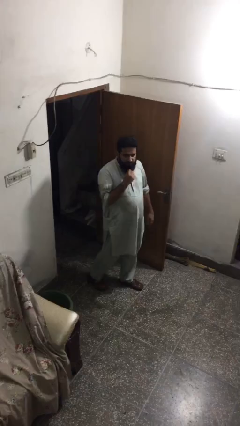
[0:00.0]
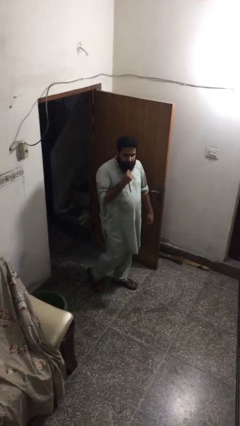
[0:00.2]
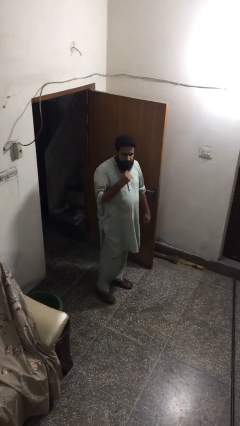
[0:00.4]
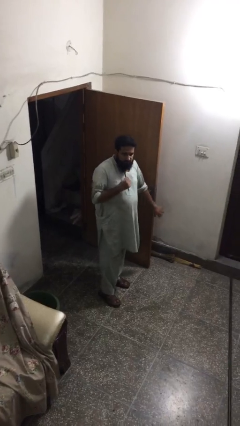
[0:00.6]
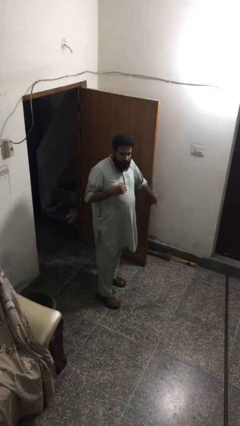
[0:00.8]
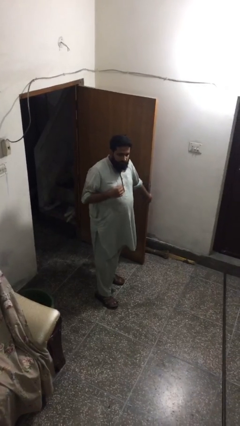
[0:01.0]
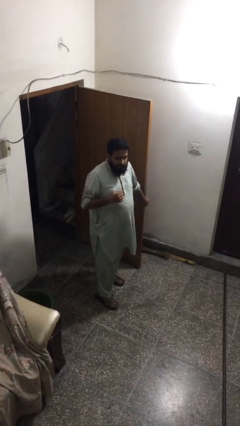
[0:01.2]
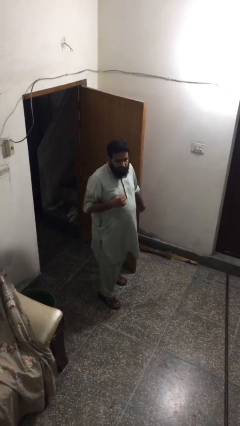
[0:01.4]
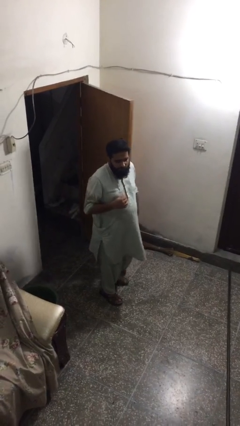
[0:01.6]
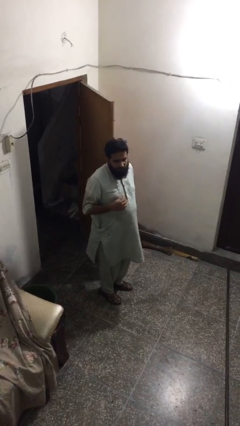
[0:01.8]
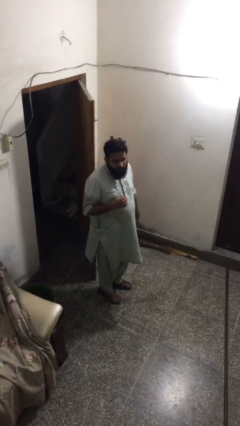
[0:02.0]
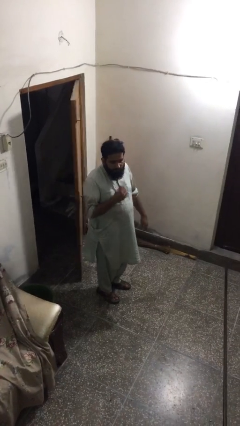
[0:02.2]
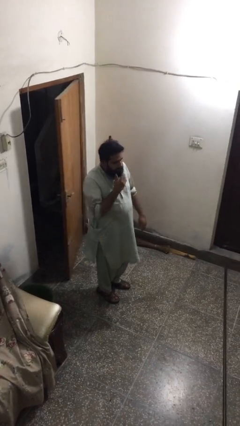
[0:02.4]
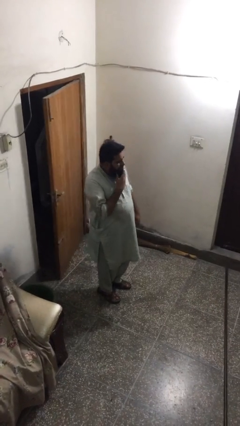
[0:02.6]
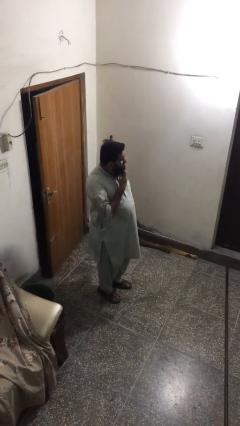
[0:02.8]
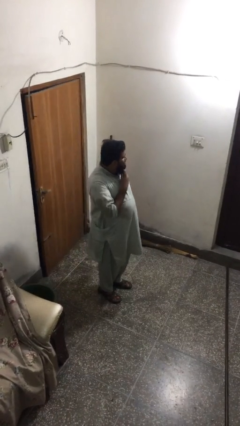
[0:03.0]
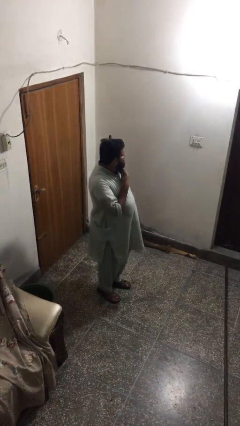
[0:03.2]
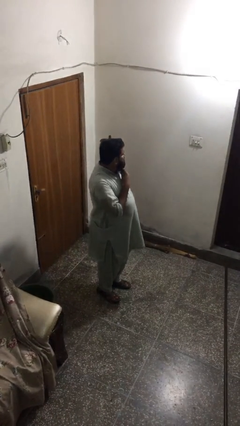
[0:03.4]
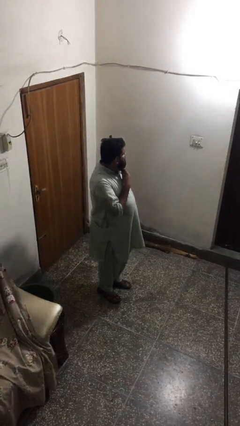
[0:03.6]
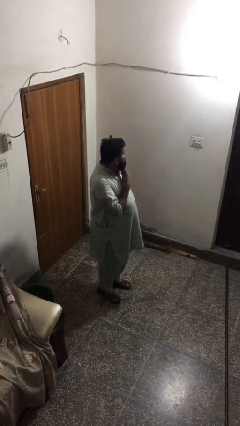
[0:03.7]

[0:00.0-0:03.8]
person closes facility door

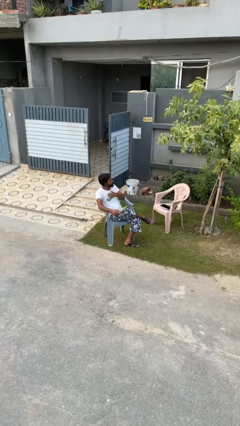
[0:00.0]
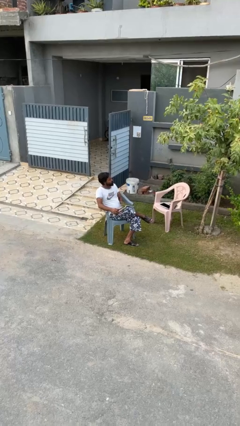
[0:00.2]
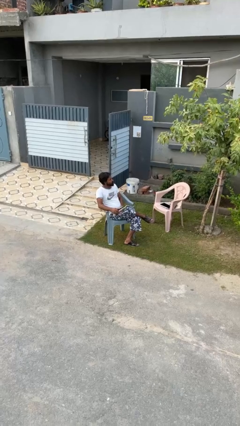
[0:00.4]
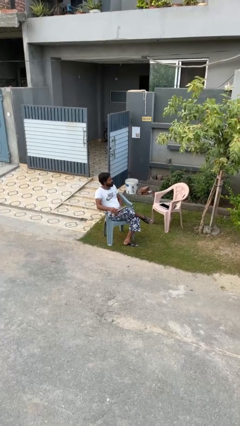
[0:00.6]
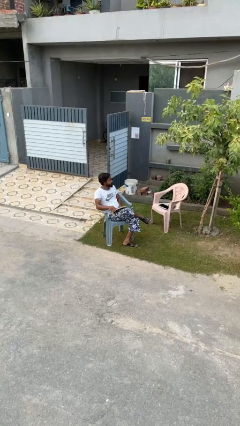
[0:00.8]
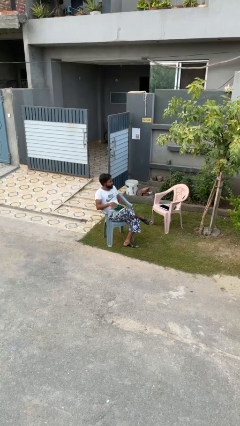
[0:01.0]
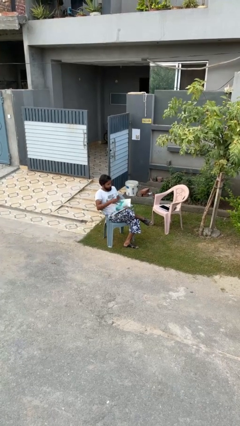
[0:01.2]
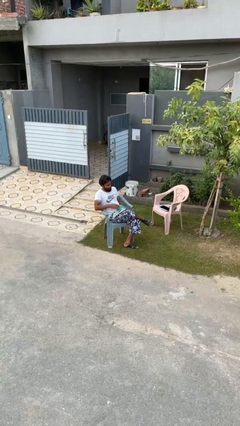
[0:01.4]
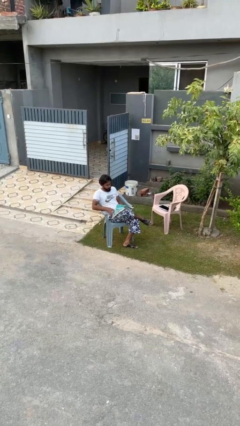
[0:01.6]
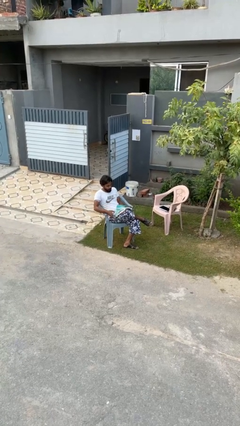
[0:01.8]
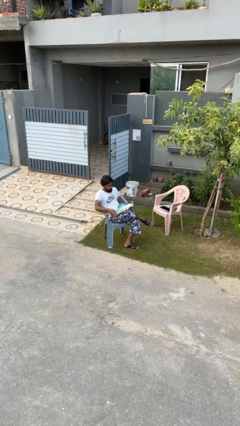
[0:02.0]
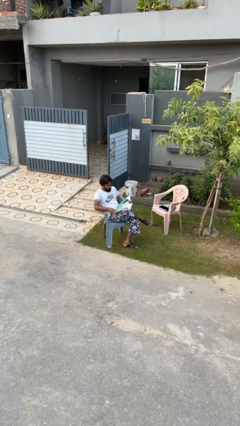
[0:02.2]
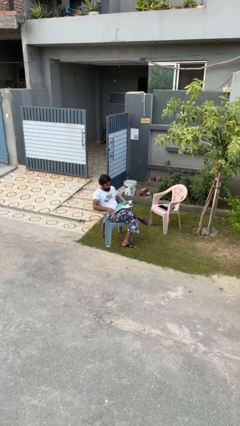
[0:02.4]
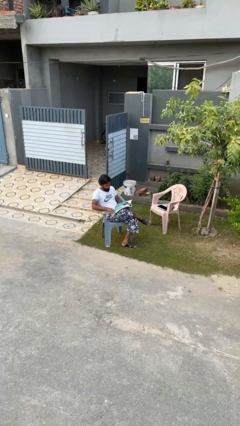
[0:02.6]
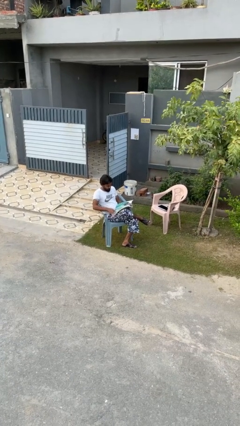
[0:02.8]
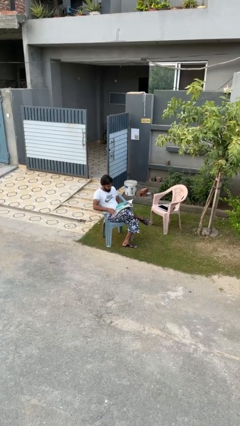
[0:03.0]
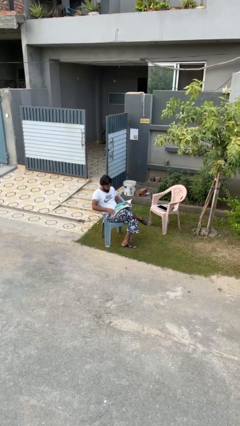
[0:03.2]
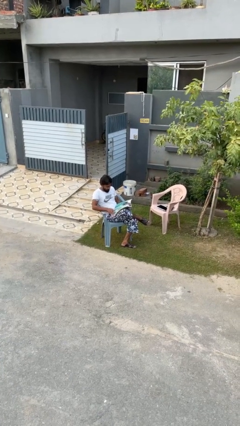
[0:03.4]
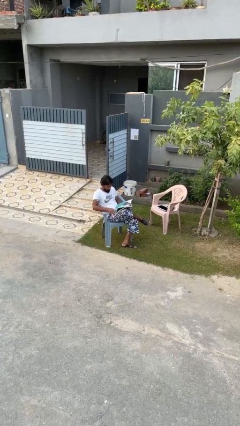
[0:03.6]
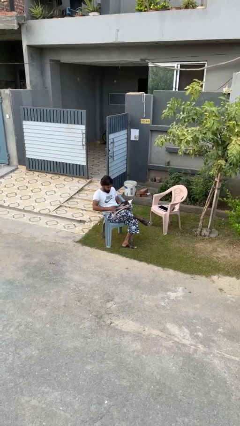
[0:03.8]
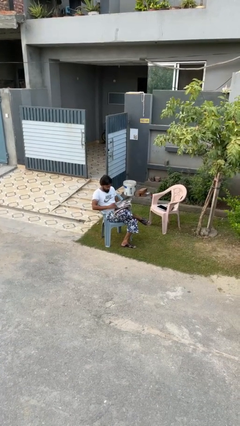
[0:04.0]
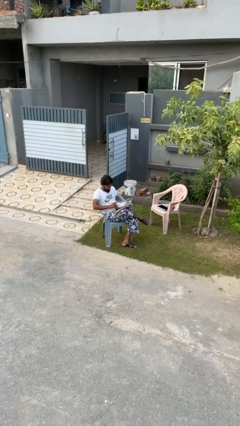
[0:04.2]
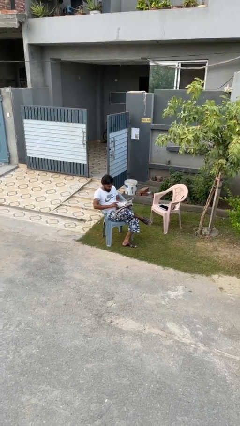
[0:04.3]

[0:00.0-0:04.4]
person reads magazine

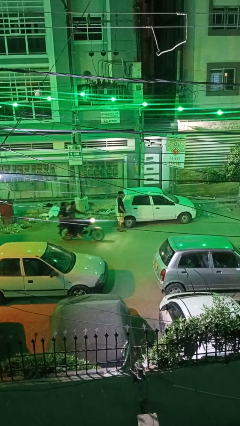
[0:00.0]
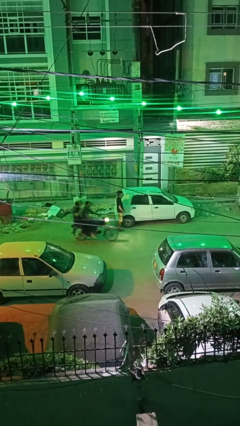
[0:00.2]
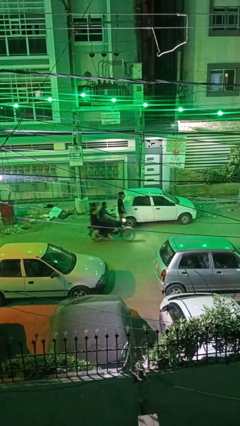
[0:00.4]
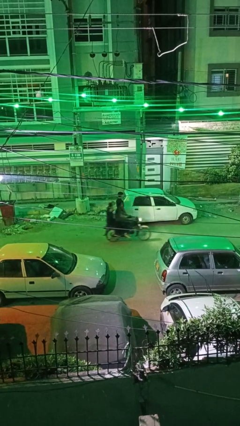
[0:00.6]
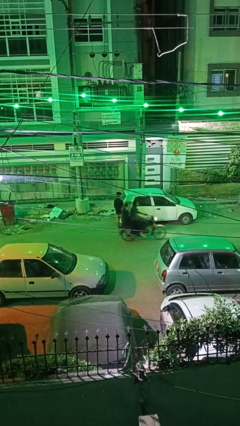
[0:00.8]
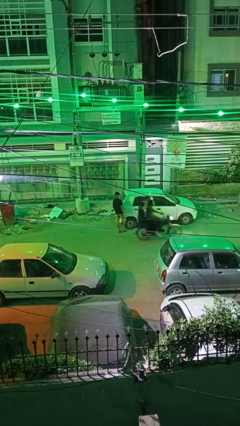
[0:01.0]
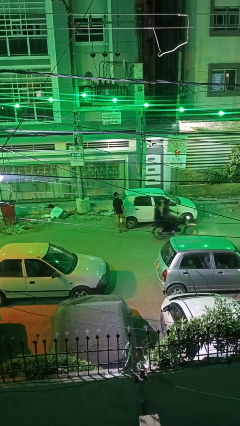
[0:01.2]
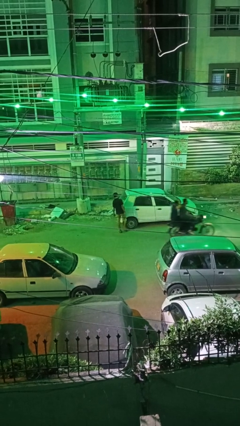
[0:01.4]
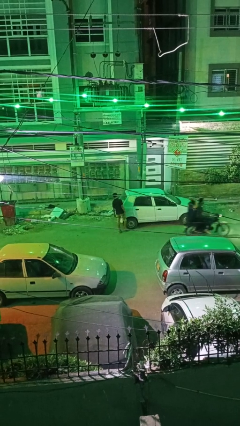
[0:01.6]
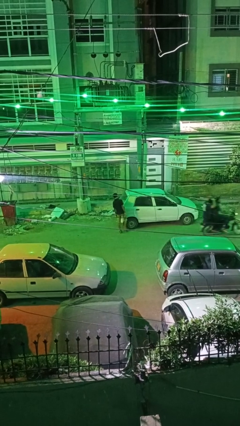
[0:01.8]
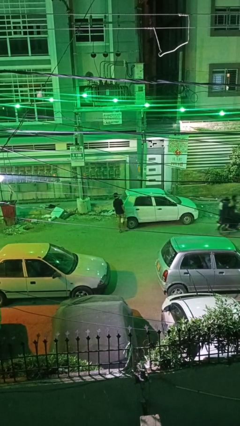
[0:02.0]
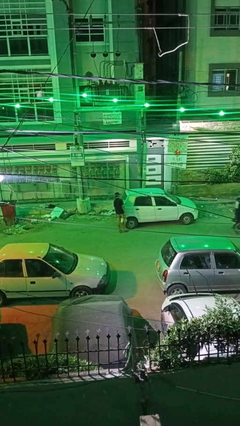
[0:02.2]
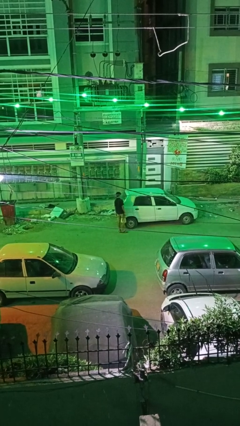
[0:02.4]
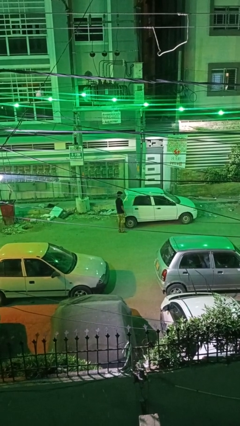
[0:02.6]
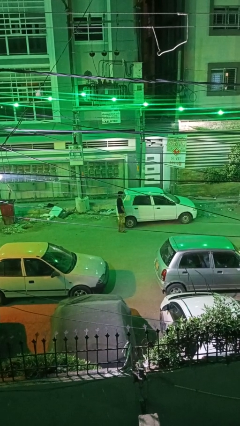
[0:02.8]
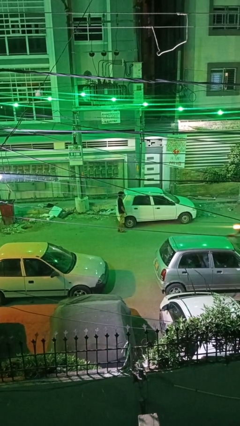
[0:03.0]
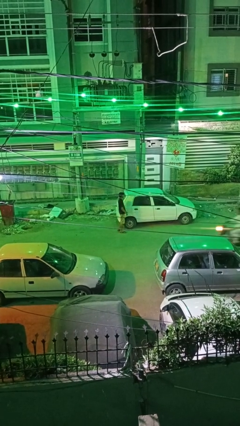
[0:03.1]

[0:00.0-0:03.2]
person kicks car tires

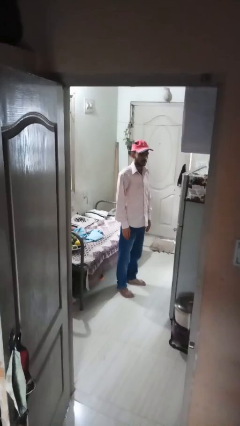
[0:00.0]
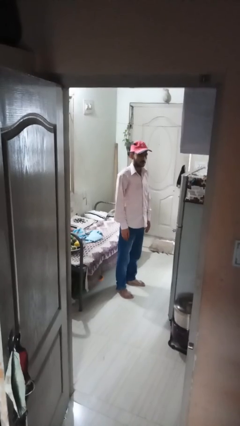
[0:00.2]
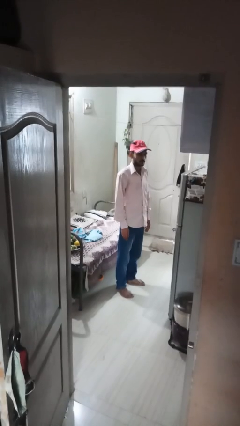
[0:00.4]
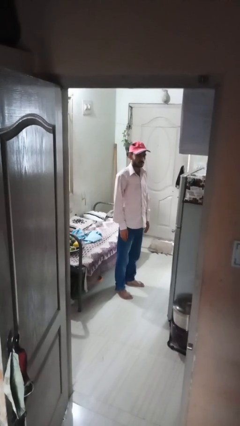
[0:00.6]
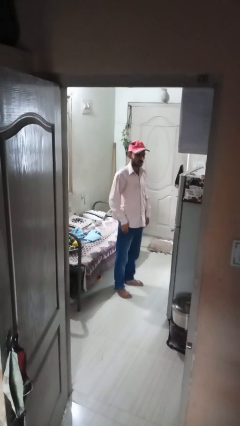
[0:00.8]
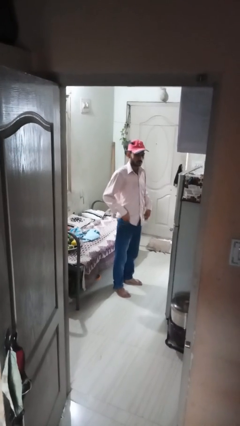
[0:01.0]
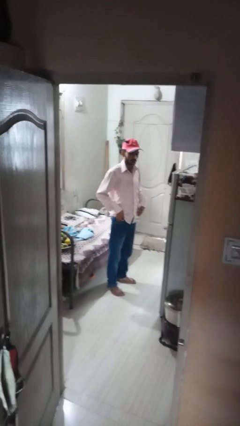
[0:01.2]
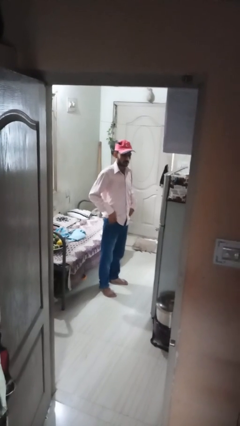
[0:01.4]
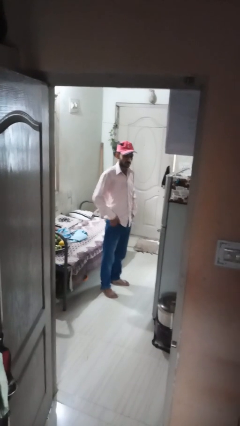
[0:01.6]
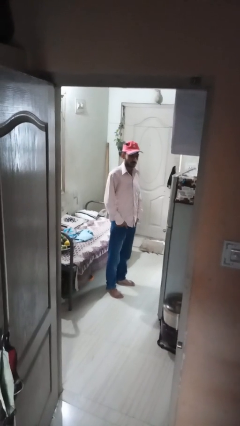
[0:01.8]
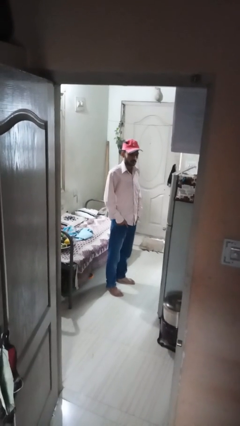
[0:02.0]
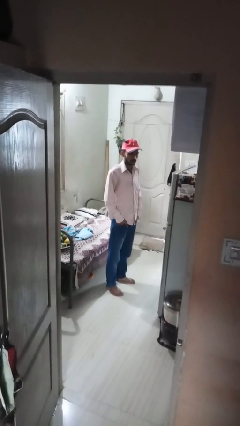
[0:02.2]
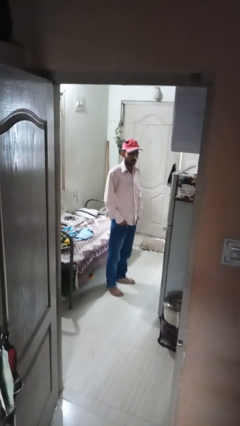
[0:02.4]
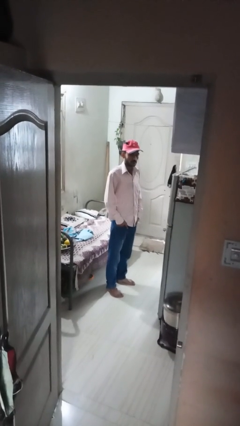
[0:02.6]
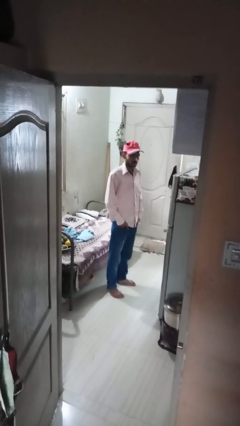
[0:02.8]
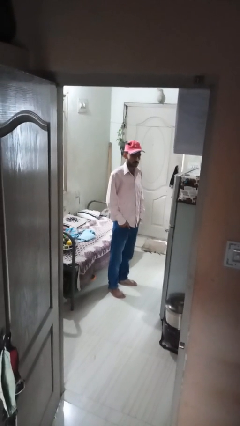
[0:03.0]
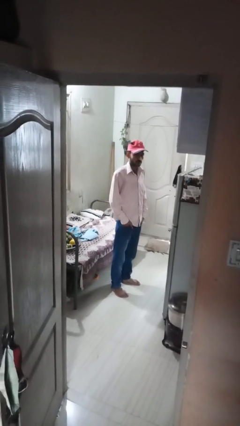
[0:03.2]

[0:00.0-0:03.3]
person puts hands in back pockets

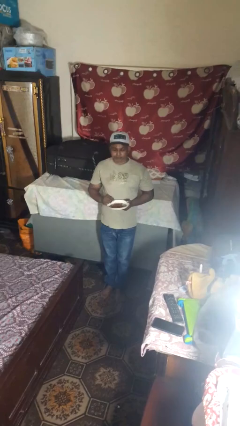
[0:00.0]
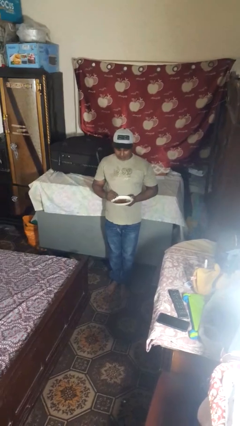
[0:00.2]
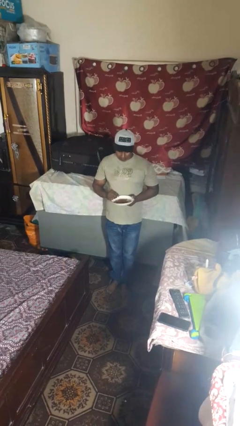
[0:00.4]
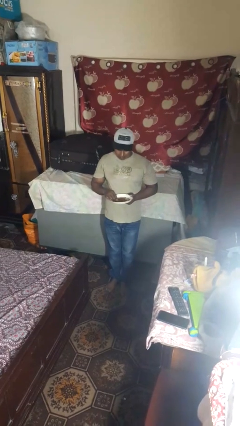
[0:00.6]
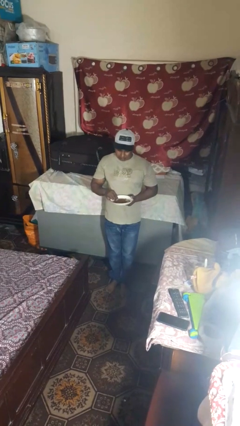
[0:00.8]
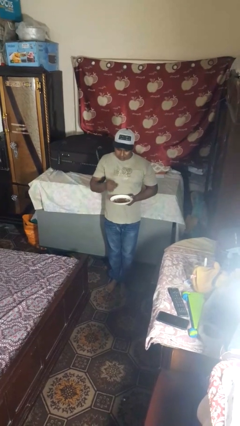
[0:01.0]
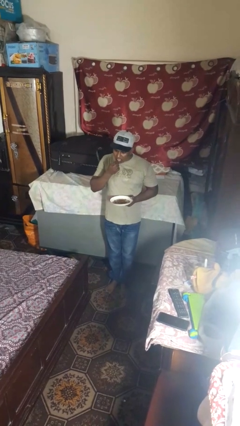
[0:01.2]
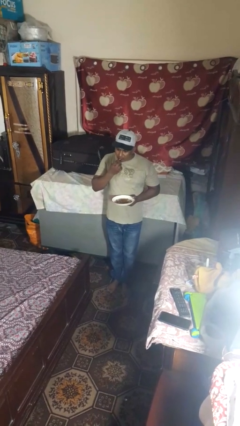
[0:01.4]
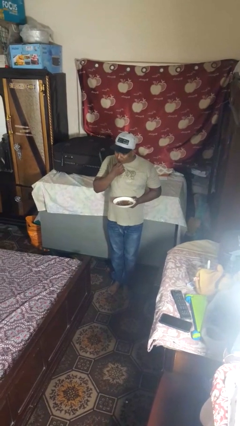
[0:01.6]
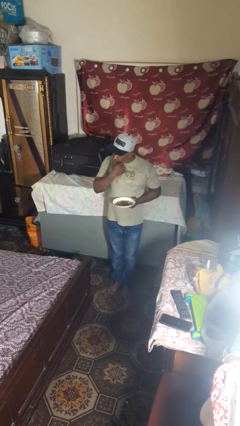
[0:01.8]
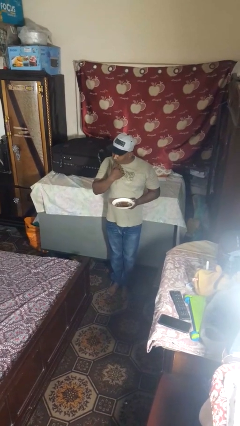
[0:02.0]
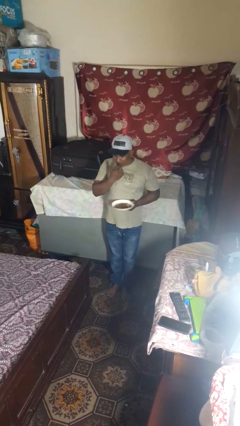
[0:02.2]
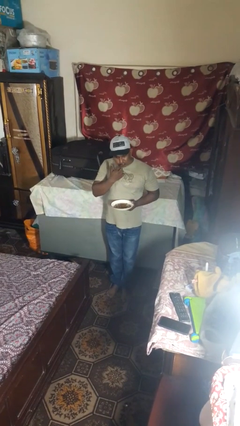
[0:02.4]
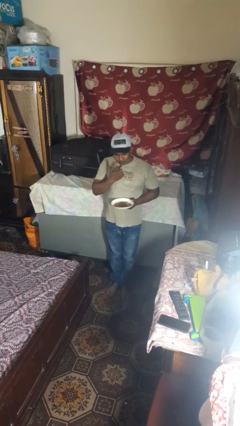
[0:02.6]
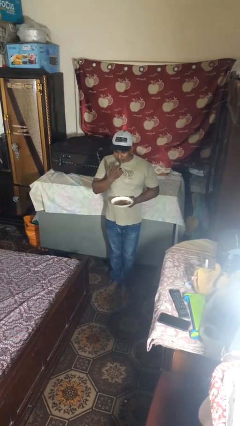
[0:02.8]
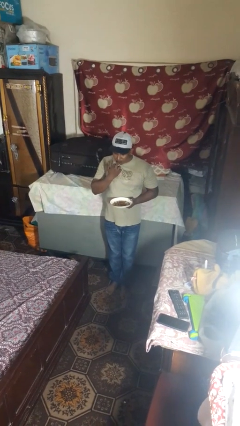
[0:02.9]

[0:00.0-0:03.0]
person licks fingers
